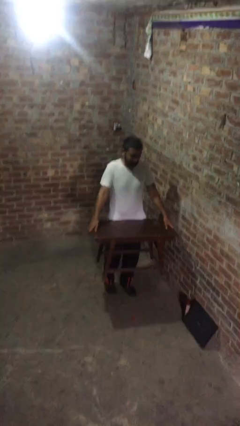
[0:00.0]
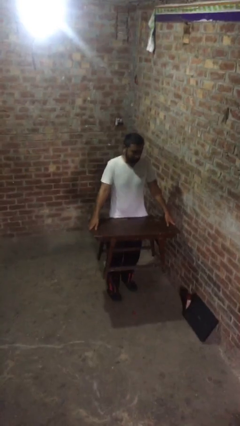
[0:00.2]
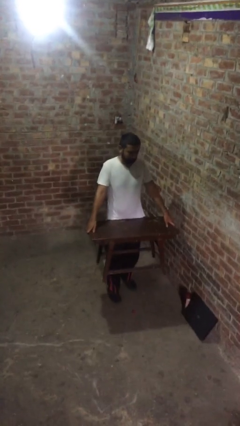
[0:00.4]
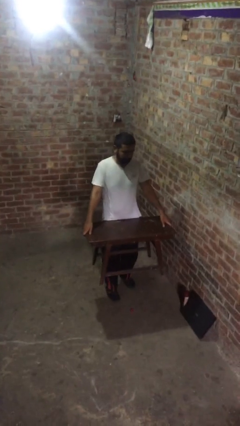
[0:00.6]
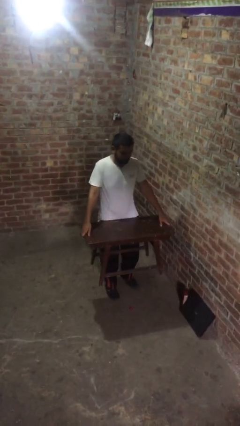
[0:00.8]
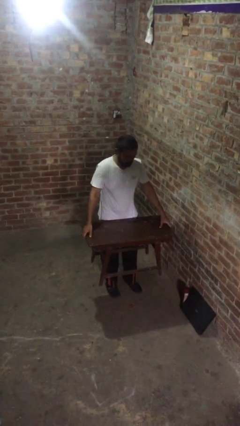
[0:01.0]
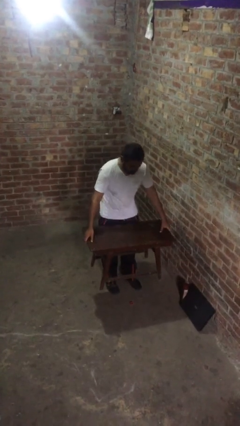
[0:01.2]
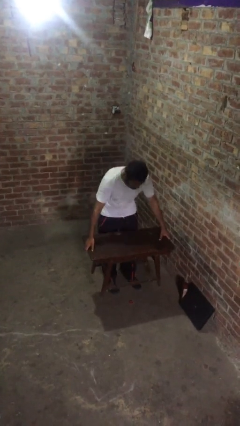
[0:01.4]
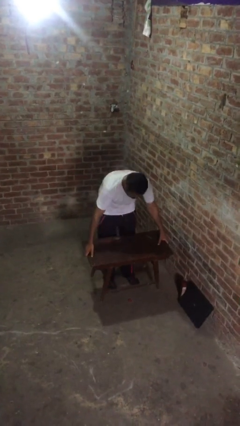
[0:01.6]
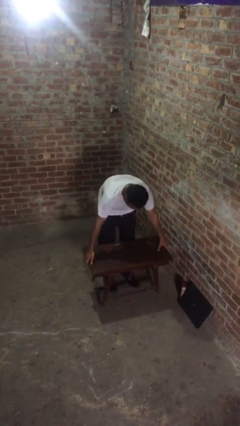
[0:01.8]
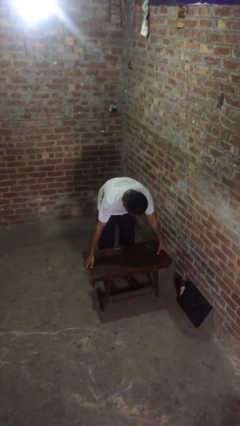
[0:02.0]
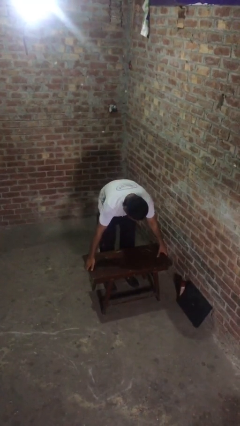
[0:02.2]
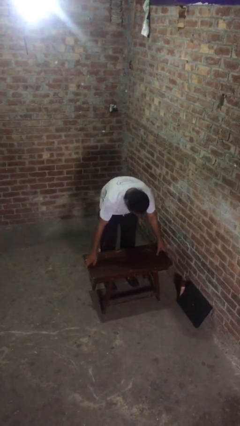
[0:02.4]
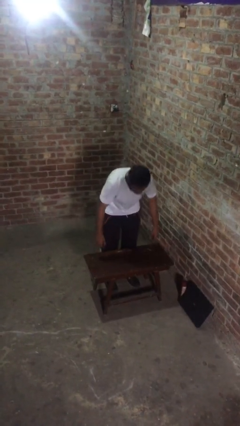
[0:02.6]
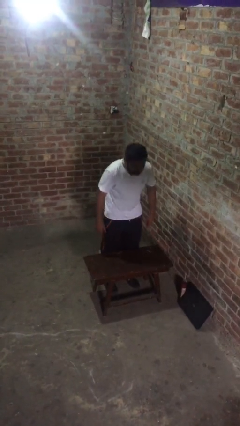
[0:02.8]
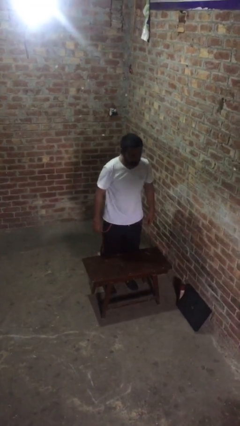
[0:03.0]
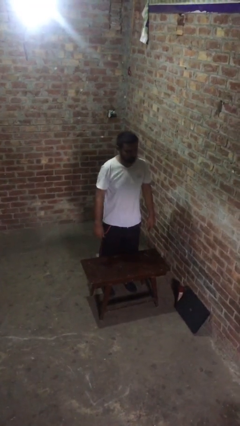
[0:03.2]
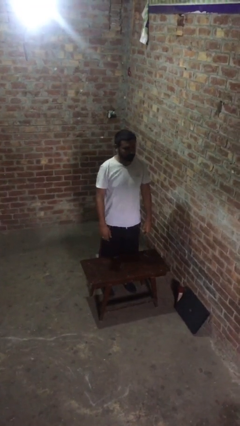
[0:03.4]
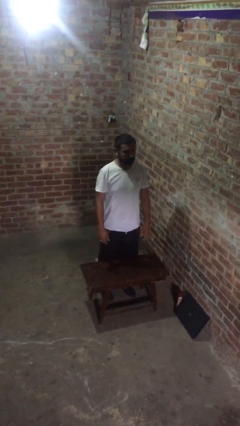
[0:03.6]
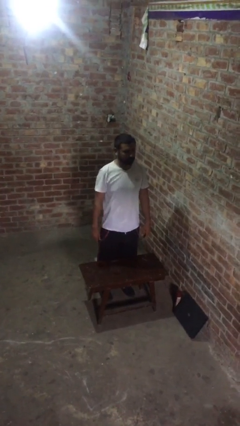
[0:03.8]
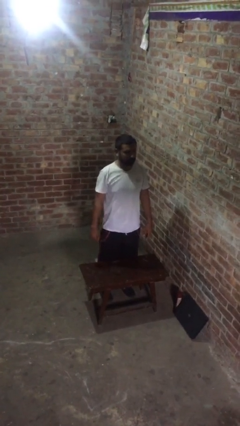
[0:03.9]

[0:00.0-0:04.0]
person puts down object on floor

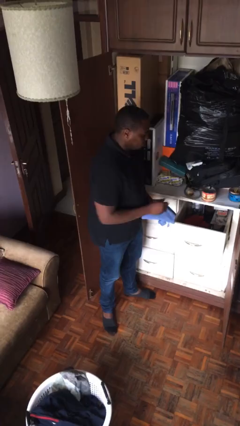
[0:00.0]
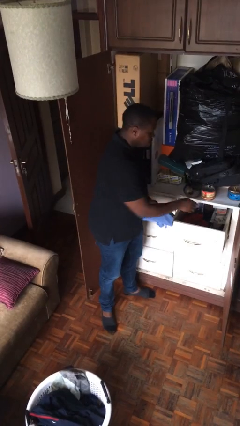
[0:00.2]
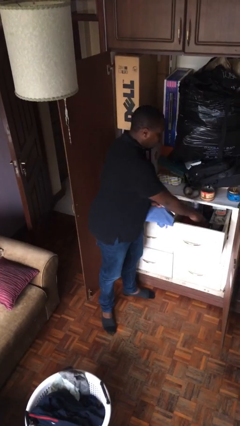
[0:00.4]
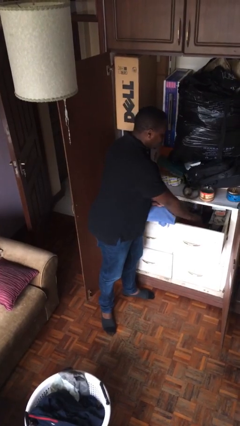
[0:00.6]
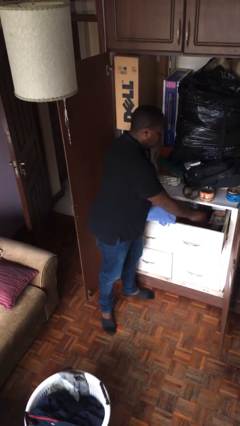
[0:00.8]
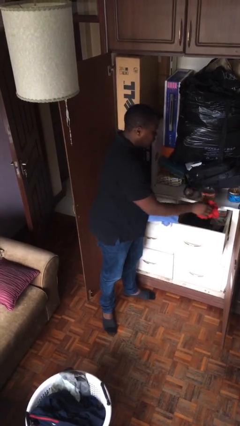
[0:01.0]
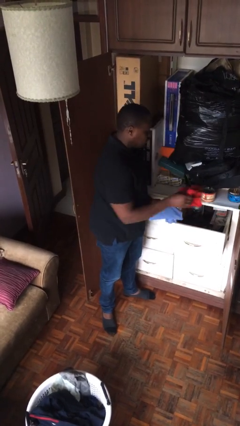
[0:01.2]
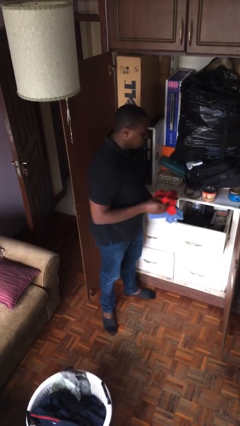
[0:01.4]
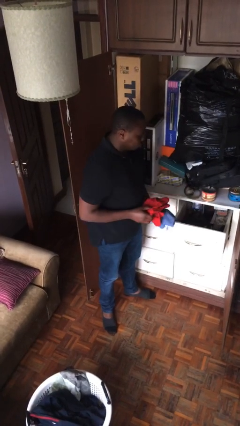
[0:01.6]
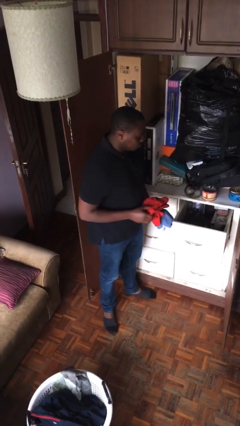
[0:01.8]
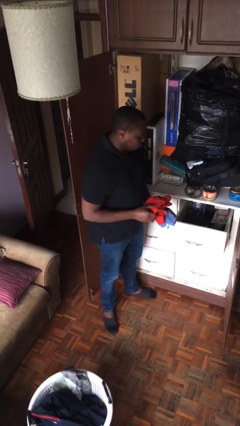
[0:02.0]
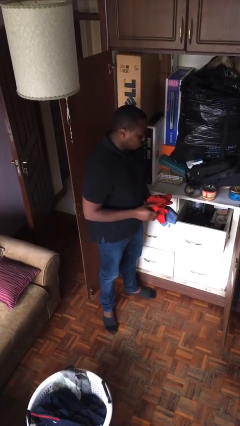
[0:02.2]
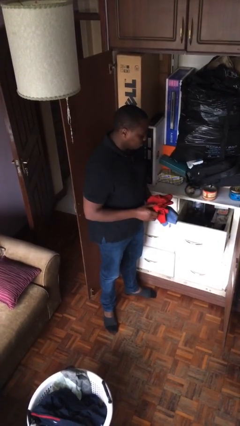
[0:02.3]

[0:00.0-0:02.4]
person takes clothes from dresser

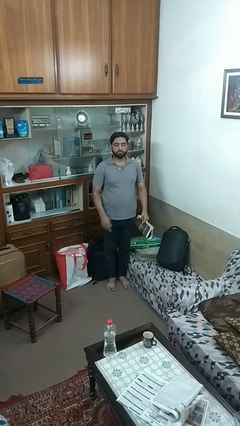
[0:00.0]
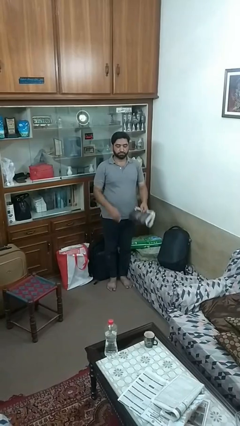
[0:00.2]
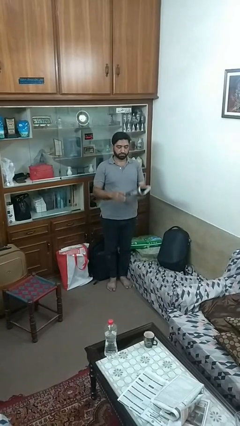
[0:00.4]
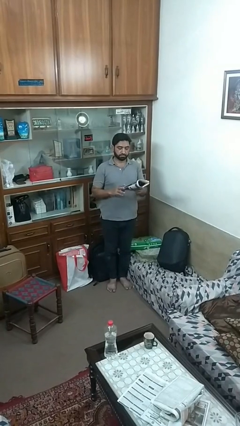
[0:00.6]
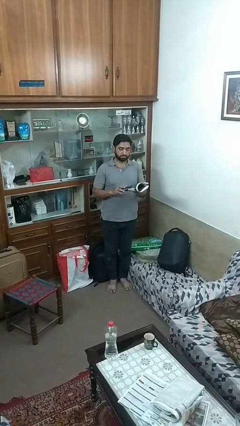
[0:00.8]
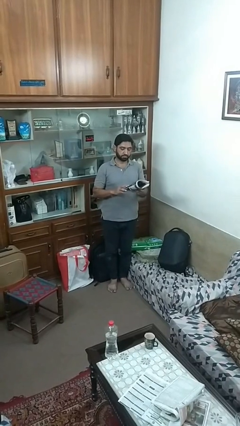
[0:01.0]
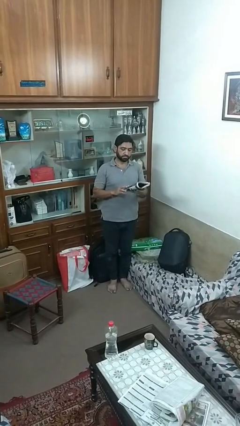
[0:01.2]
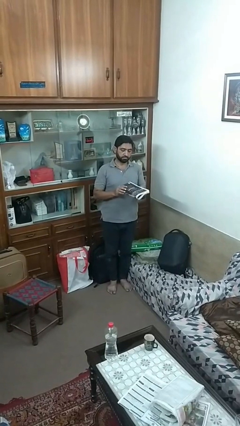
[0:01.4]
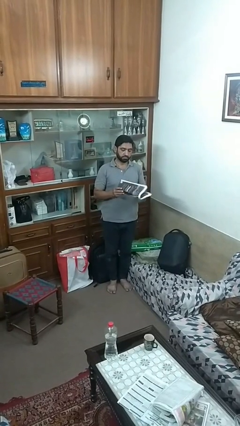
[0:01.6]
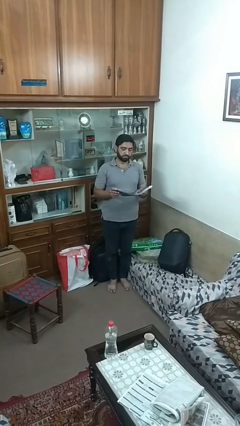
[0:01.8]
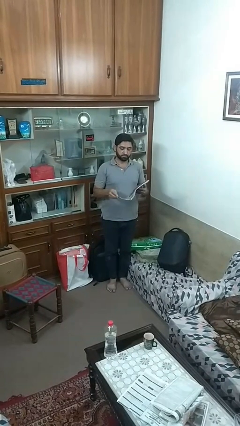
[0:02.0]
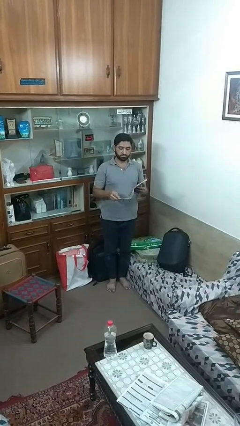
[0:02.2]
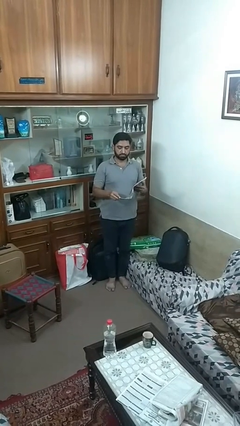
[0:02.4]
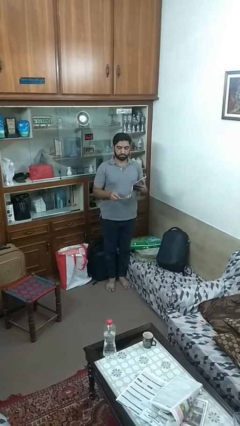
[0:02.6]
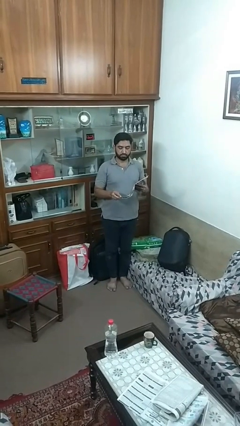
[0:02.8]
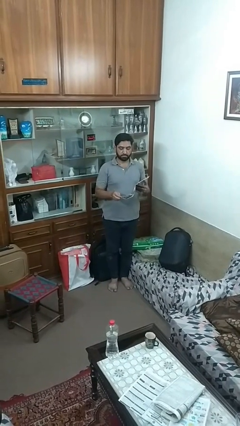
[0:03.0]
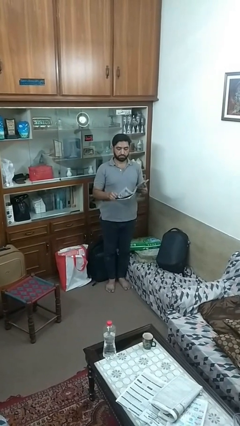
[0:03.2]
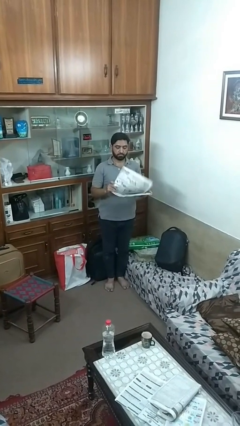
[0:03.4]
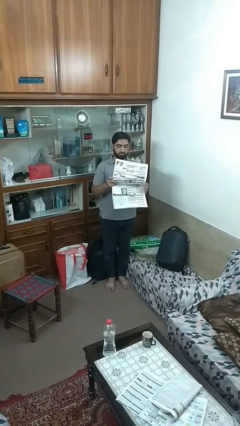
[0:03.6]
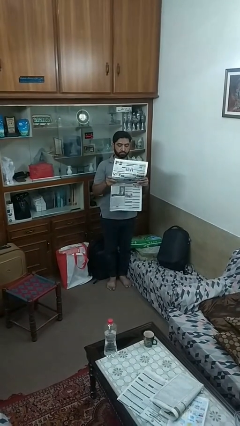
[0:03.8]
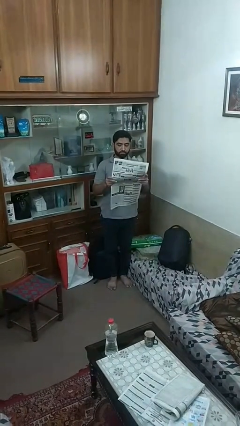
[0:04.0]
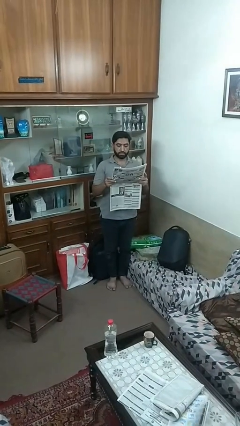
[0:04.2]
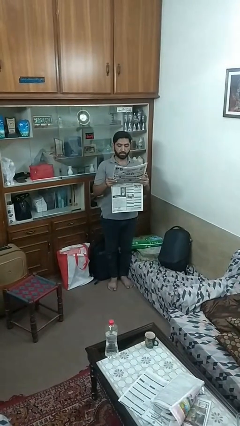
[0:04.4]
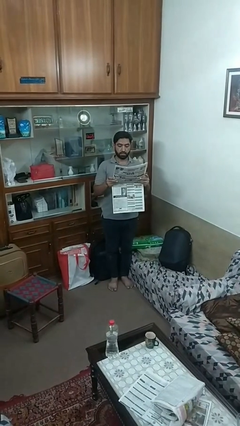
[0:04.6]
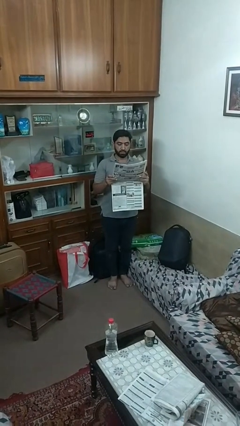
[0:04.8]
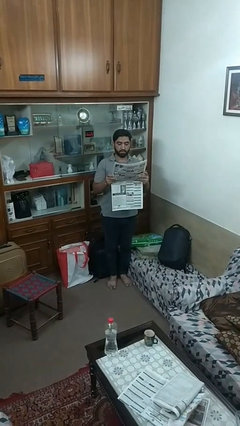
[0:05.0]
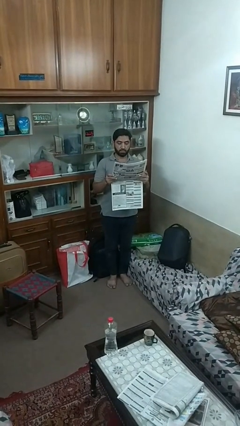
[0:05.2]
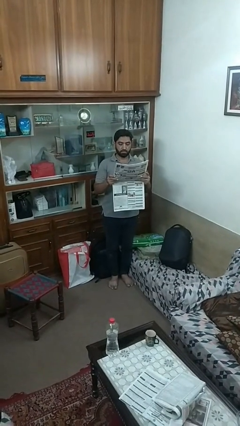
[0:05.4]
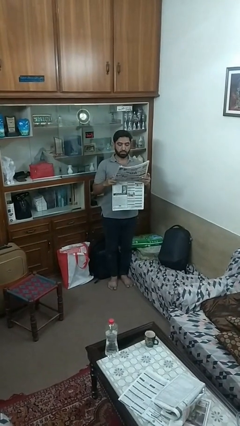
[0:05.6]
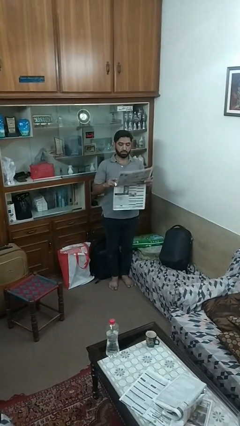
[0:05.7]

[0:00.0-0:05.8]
person reads newspaper

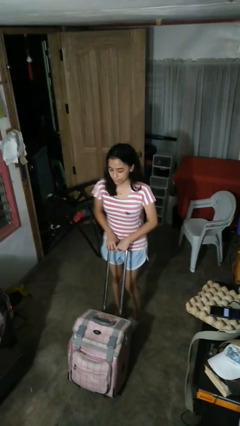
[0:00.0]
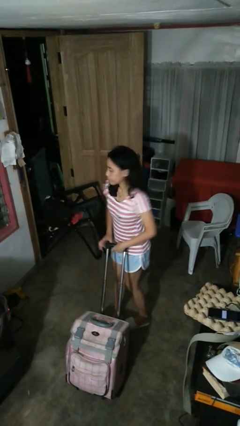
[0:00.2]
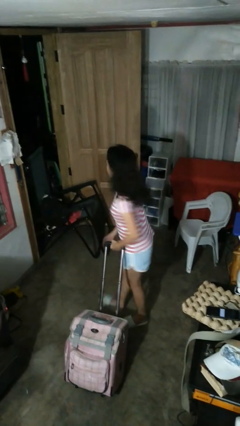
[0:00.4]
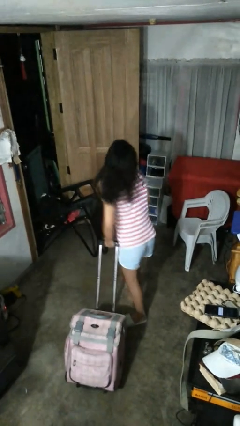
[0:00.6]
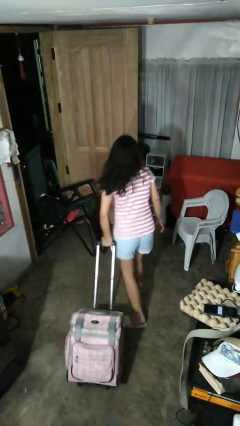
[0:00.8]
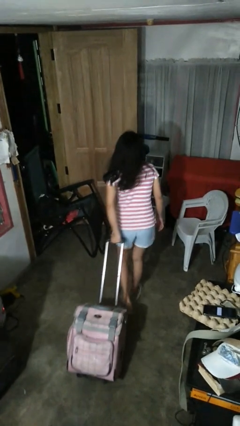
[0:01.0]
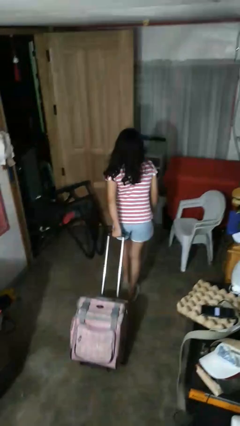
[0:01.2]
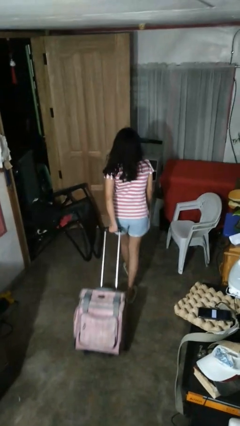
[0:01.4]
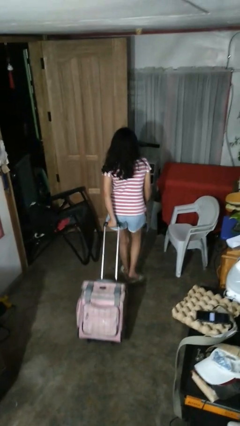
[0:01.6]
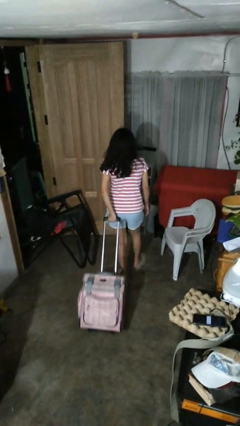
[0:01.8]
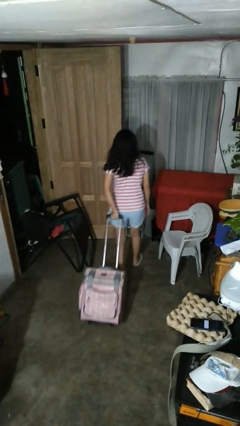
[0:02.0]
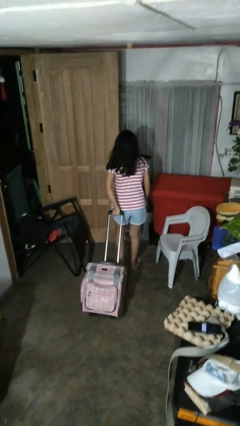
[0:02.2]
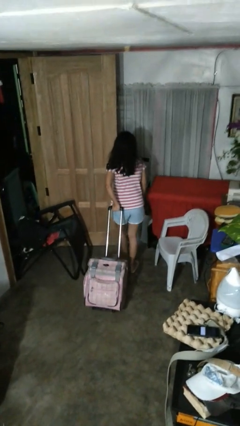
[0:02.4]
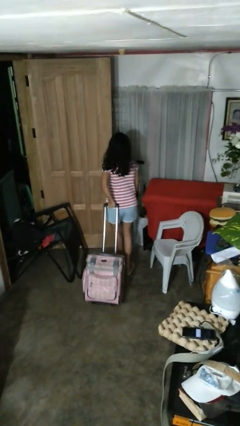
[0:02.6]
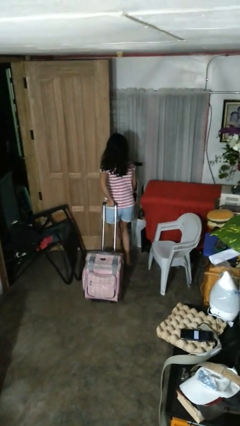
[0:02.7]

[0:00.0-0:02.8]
person pulls wheeled cart

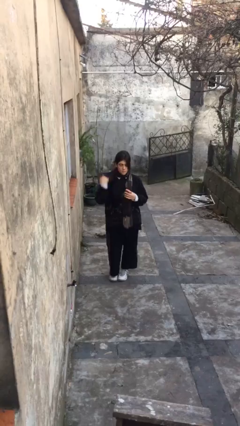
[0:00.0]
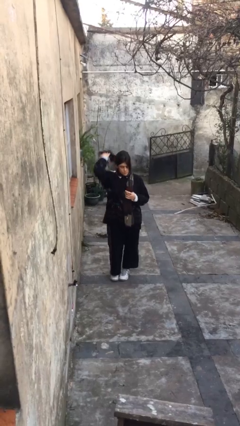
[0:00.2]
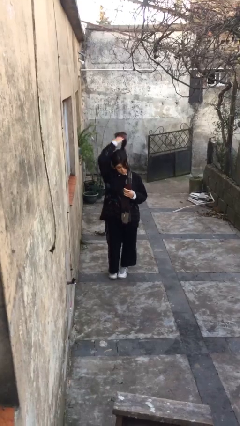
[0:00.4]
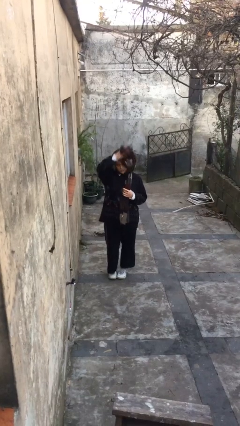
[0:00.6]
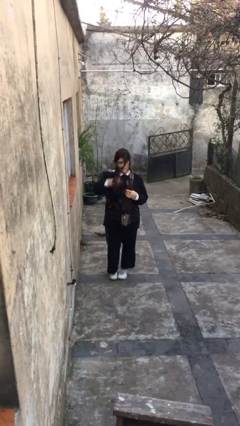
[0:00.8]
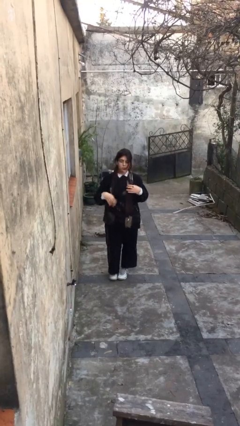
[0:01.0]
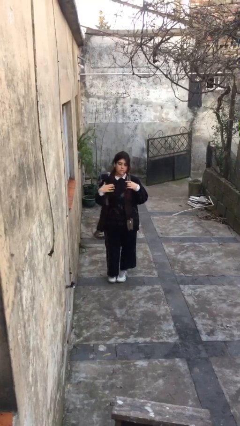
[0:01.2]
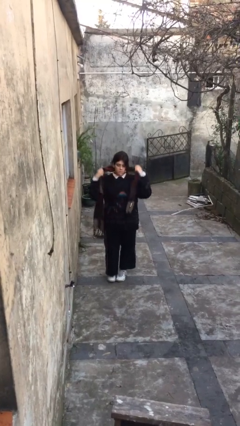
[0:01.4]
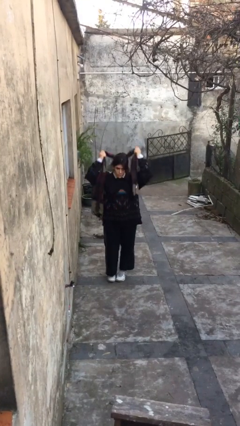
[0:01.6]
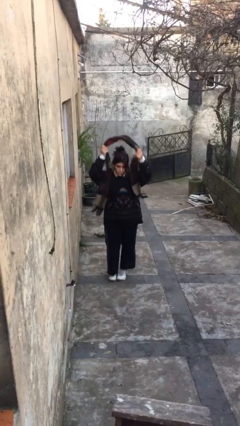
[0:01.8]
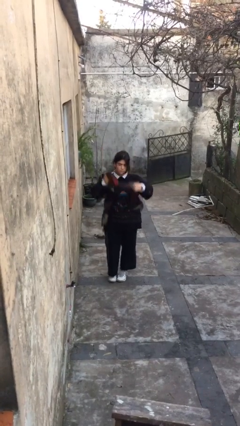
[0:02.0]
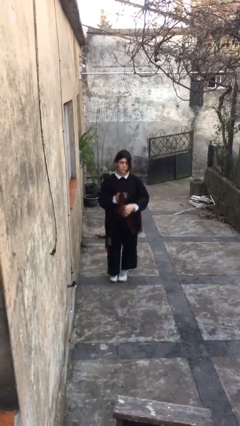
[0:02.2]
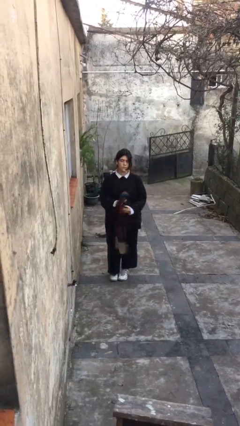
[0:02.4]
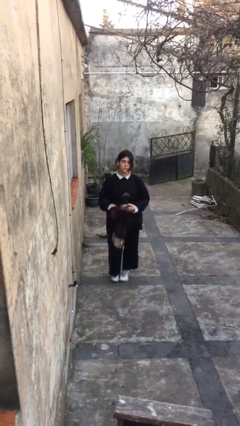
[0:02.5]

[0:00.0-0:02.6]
person takes off scarf
